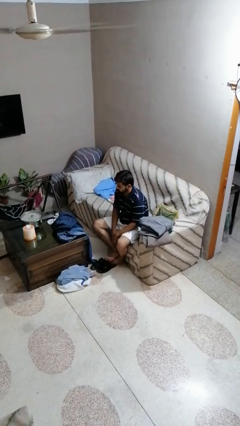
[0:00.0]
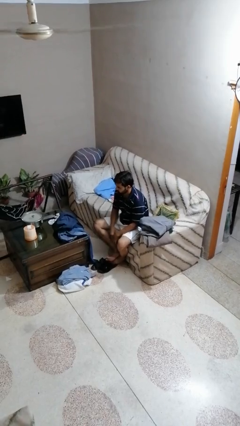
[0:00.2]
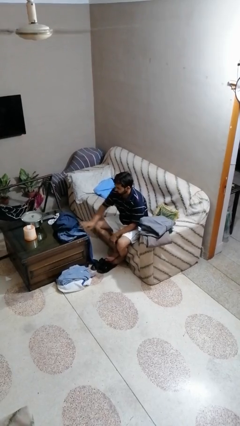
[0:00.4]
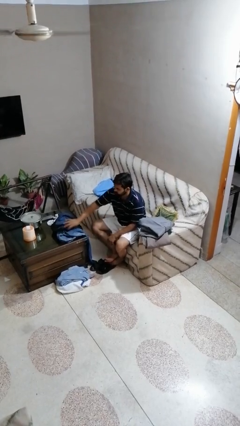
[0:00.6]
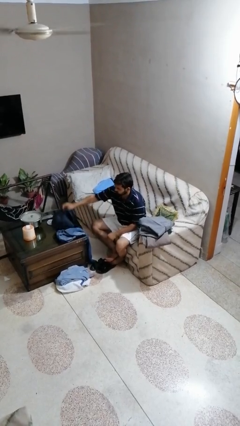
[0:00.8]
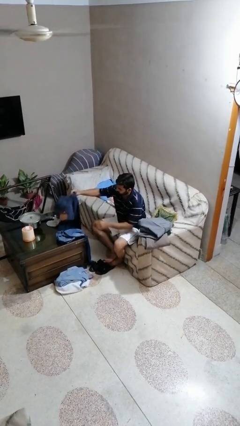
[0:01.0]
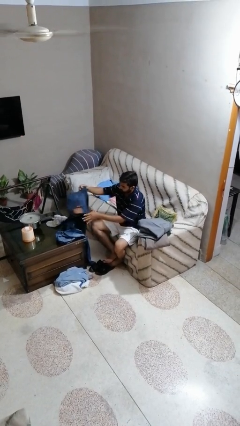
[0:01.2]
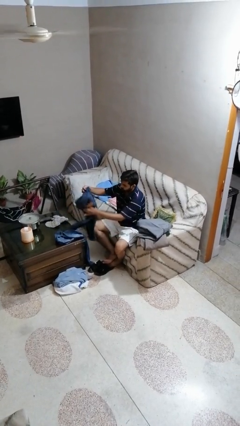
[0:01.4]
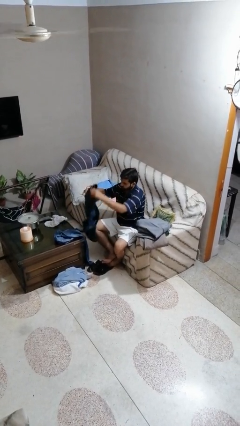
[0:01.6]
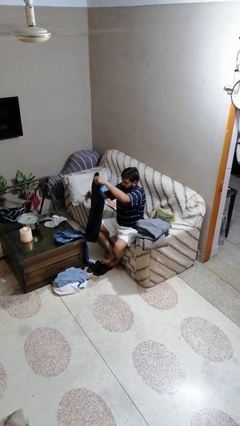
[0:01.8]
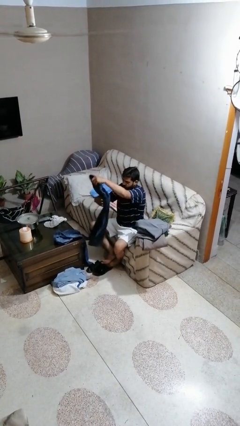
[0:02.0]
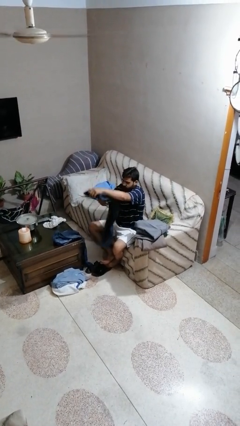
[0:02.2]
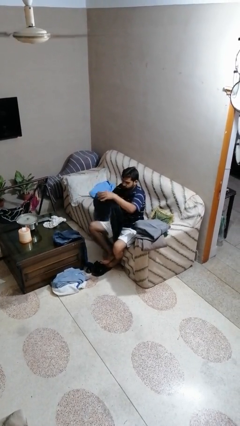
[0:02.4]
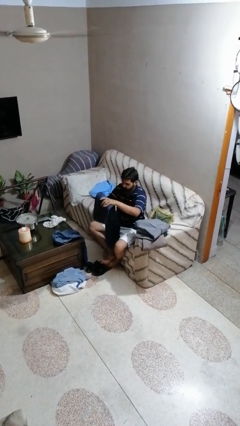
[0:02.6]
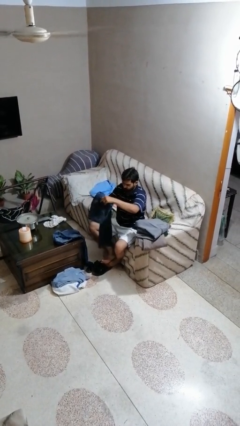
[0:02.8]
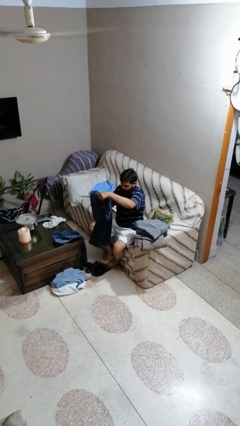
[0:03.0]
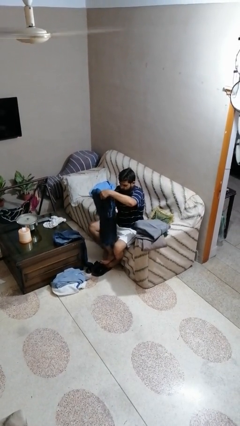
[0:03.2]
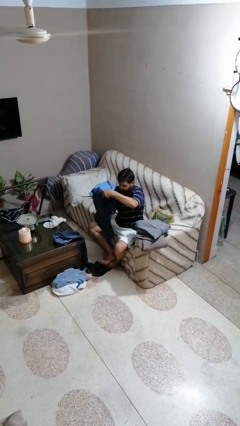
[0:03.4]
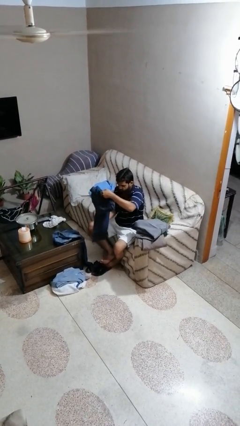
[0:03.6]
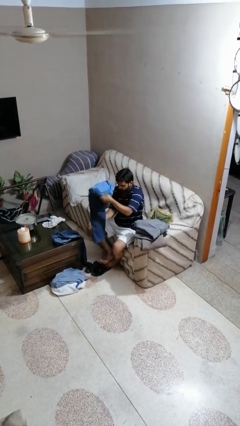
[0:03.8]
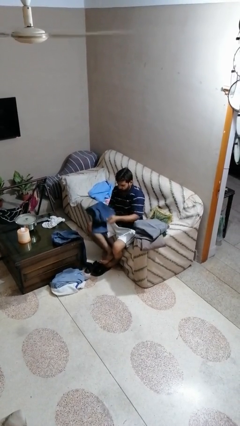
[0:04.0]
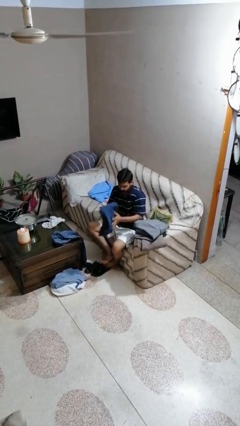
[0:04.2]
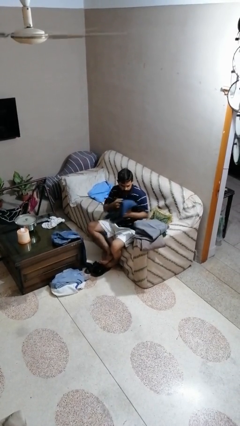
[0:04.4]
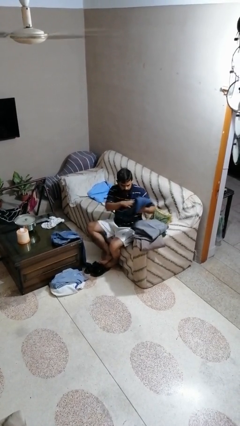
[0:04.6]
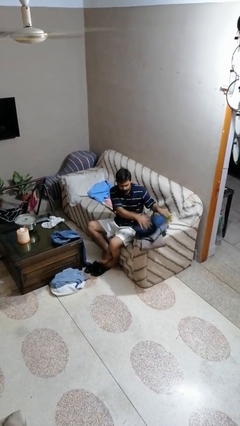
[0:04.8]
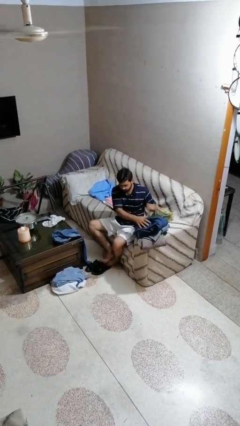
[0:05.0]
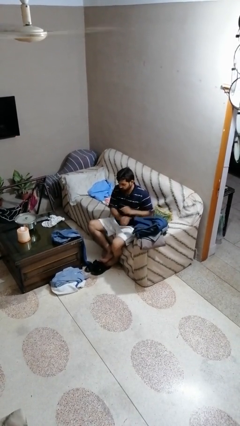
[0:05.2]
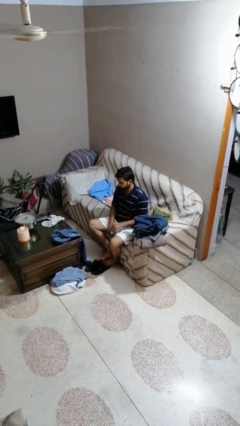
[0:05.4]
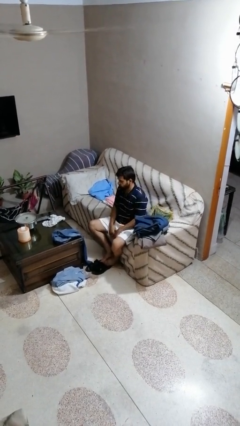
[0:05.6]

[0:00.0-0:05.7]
person folds pants

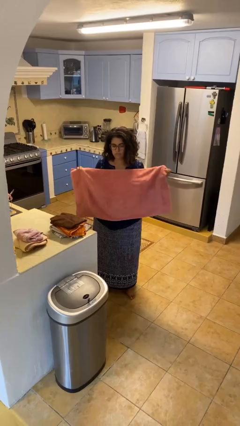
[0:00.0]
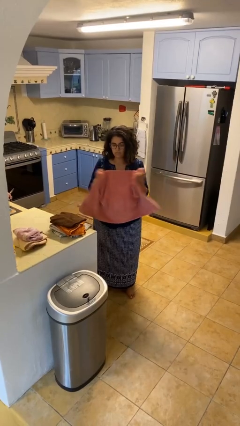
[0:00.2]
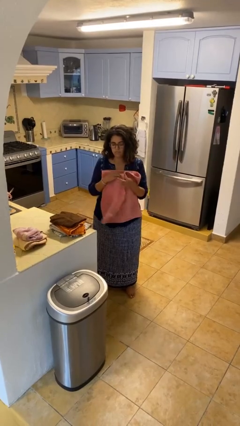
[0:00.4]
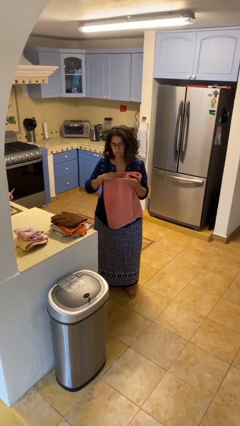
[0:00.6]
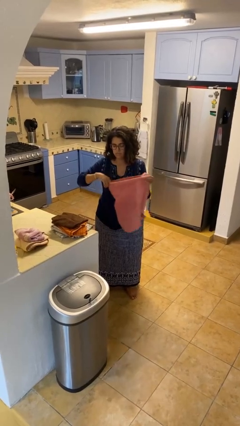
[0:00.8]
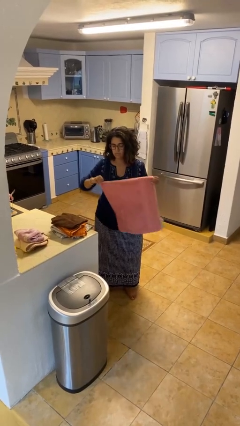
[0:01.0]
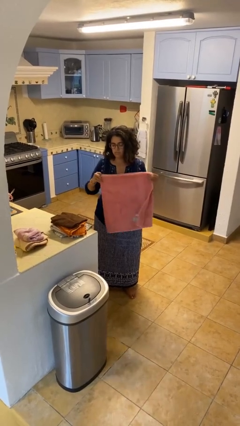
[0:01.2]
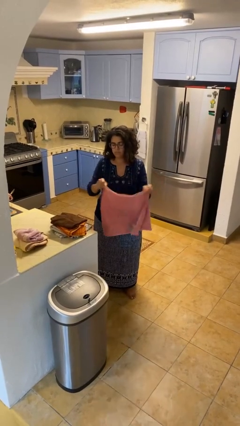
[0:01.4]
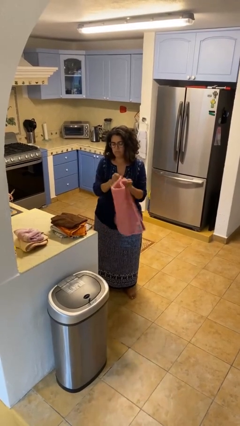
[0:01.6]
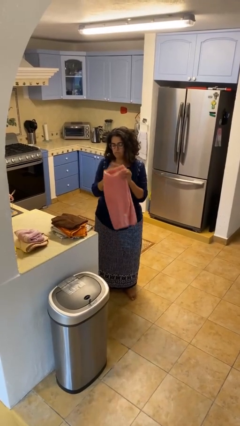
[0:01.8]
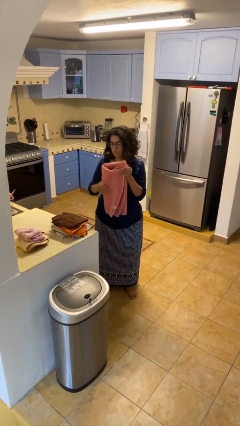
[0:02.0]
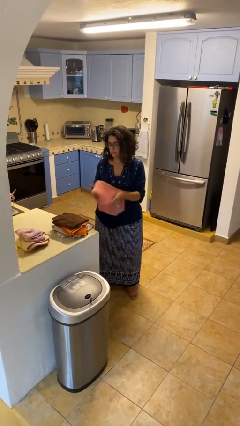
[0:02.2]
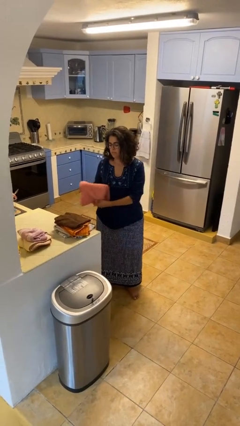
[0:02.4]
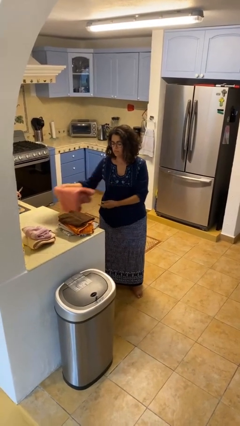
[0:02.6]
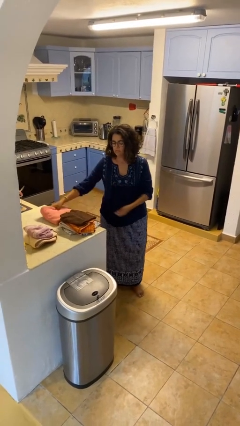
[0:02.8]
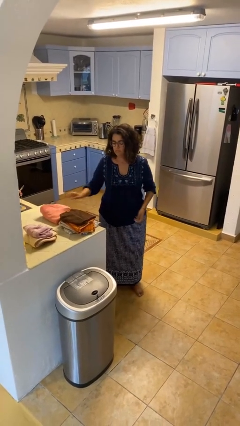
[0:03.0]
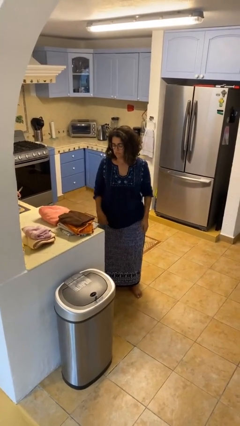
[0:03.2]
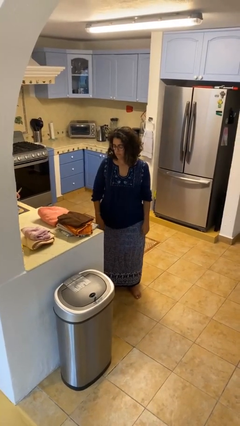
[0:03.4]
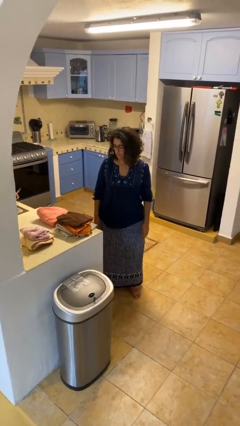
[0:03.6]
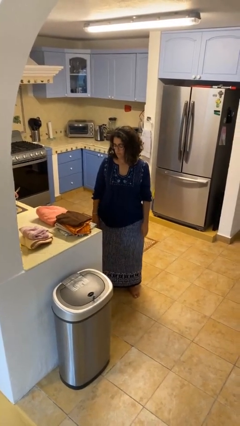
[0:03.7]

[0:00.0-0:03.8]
person folds towel

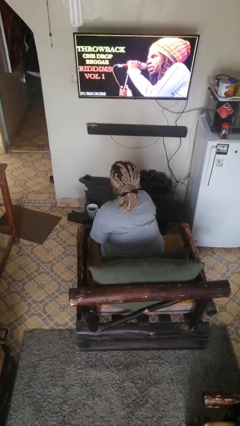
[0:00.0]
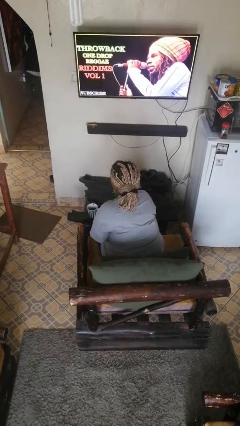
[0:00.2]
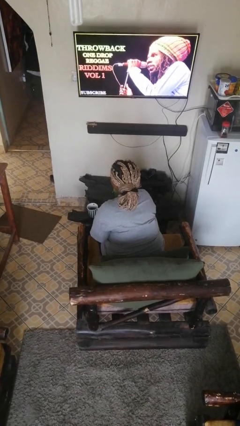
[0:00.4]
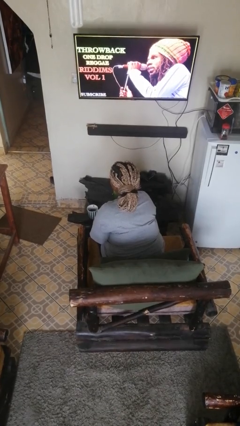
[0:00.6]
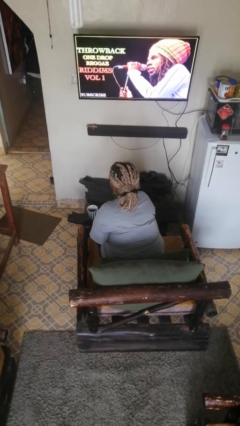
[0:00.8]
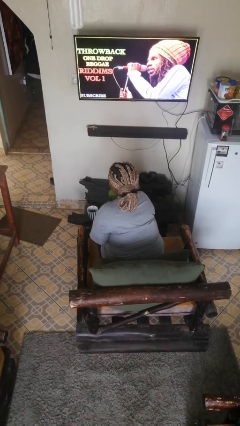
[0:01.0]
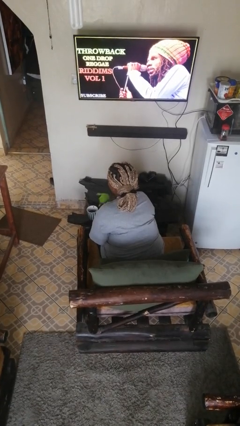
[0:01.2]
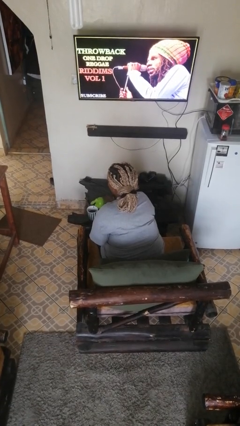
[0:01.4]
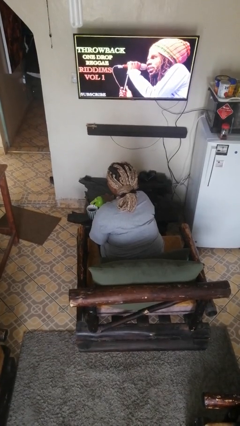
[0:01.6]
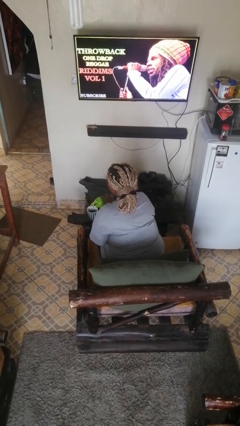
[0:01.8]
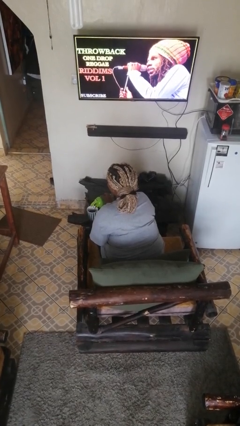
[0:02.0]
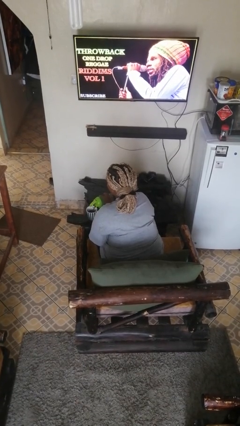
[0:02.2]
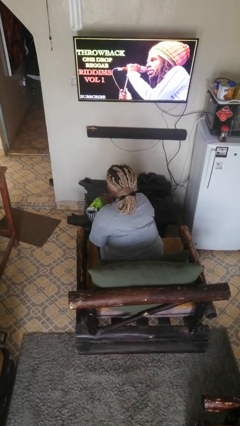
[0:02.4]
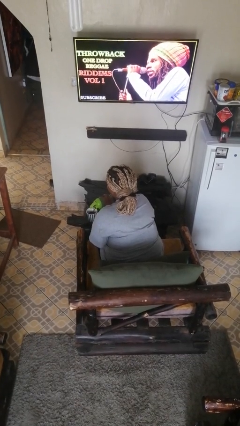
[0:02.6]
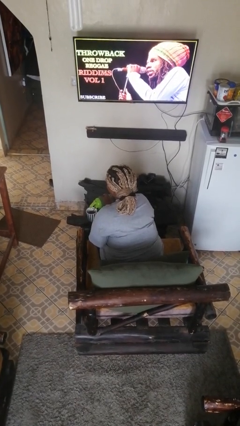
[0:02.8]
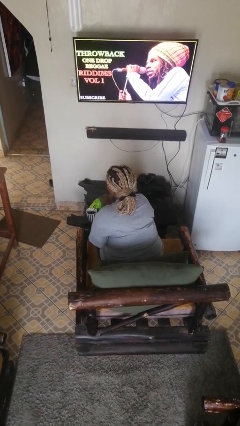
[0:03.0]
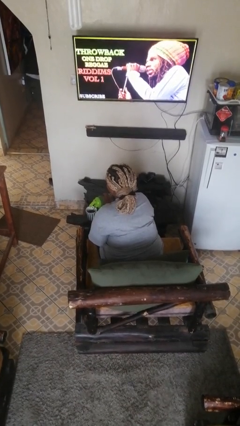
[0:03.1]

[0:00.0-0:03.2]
person pours coffee into mug

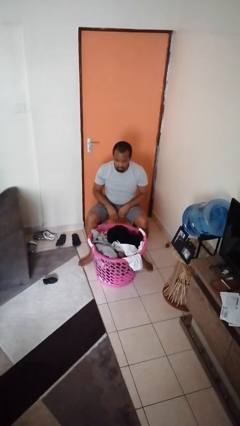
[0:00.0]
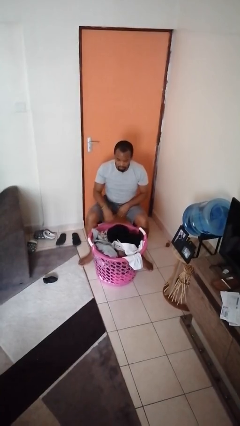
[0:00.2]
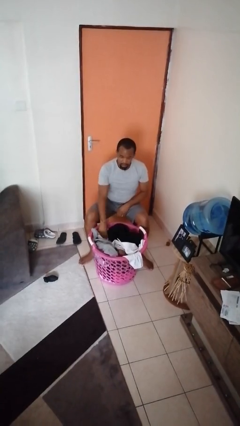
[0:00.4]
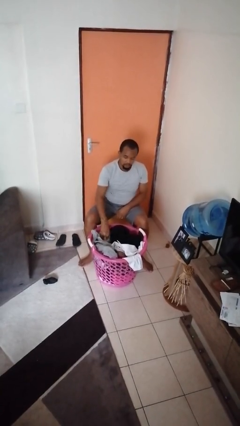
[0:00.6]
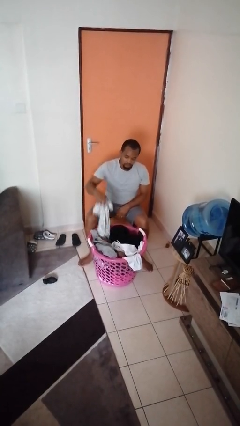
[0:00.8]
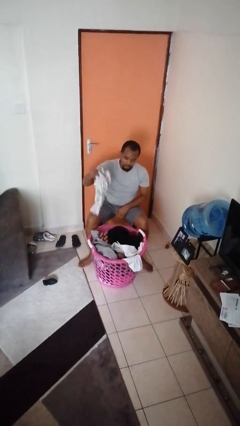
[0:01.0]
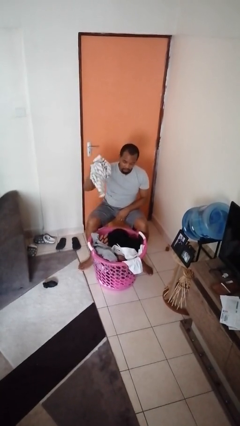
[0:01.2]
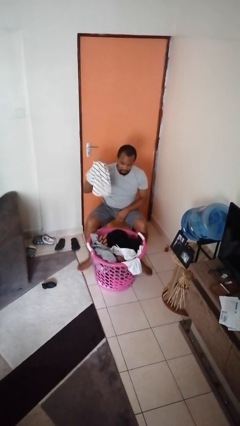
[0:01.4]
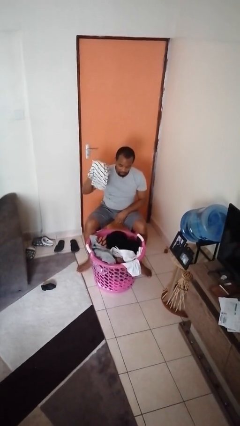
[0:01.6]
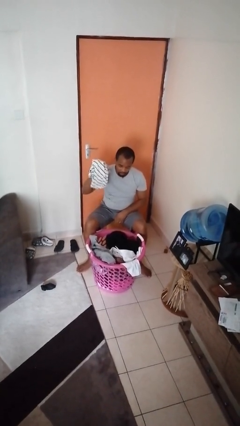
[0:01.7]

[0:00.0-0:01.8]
person takes object from basket

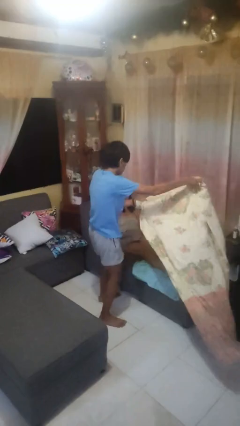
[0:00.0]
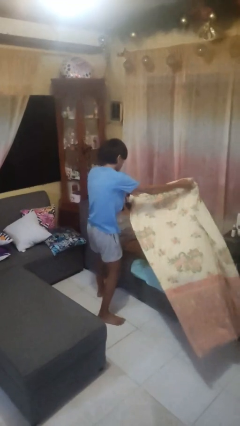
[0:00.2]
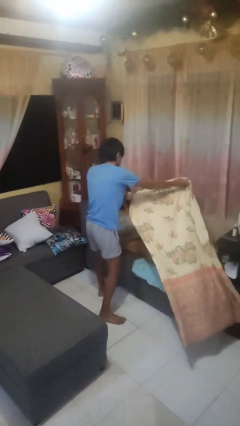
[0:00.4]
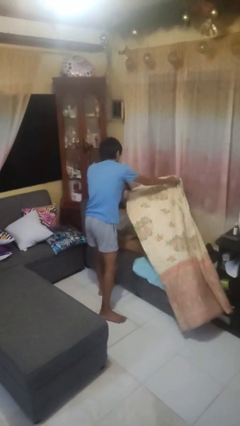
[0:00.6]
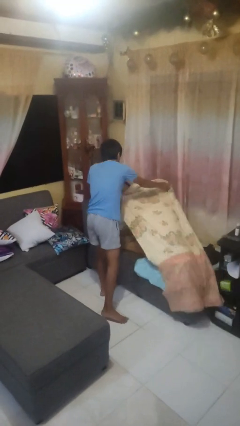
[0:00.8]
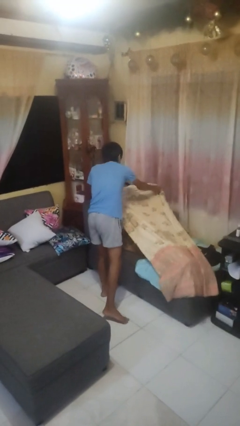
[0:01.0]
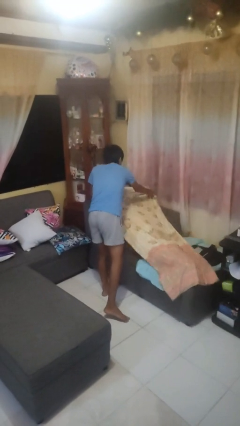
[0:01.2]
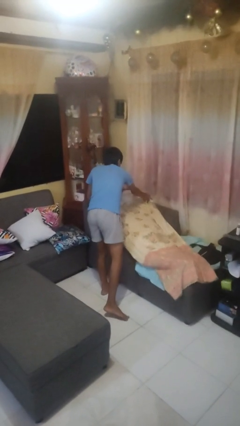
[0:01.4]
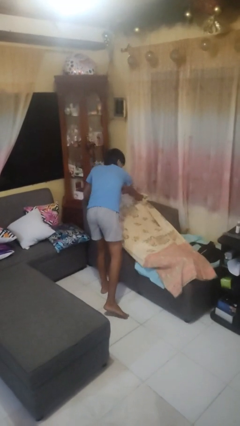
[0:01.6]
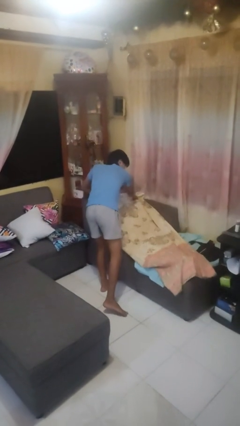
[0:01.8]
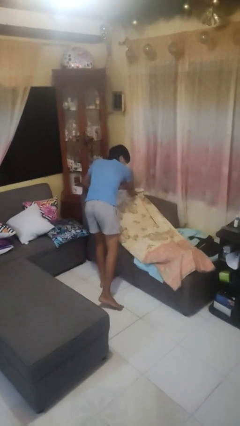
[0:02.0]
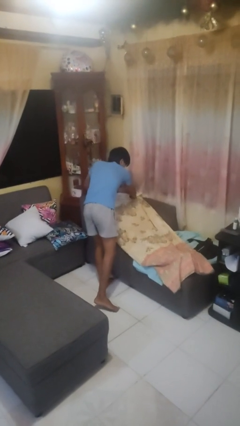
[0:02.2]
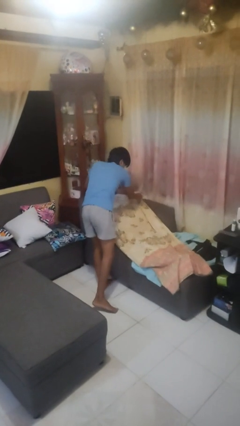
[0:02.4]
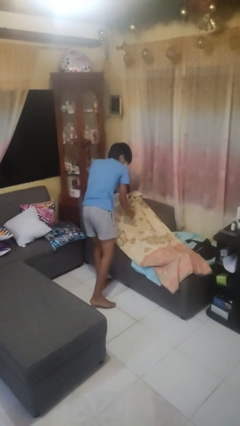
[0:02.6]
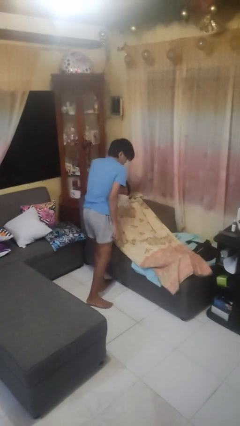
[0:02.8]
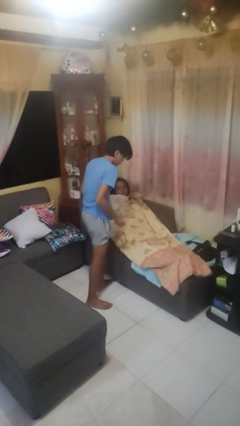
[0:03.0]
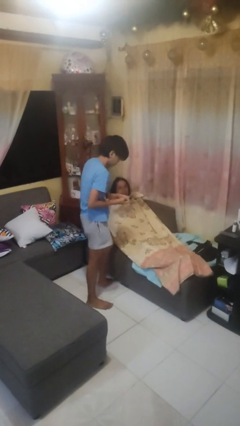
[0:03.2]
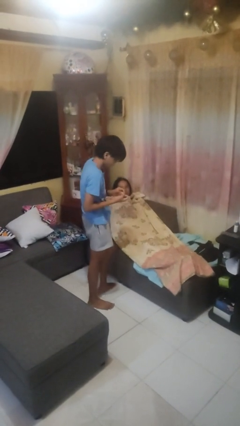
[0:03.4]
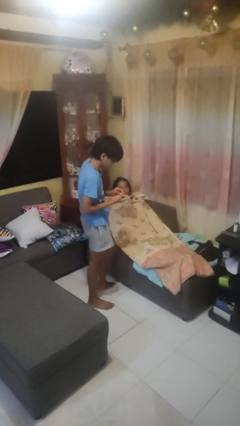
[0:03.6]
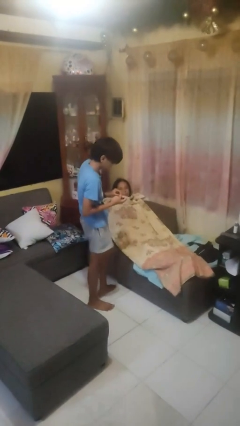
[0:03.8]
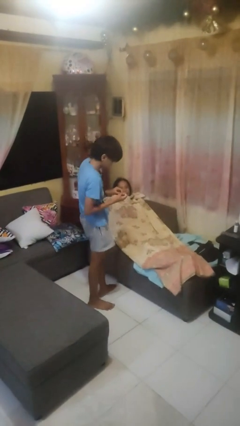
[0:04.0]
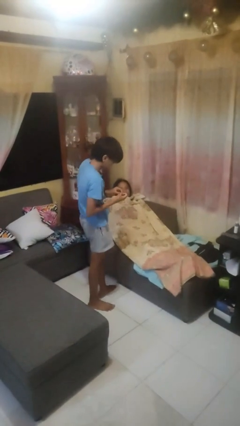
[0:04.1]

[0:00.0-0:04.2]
person covers friend with blanket
